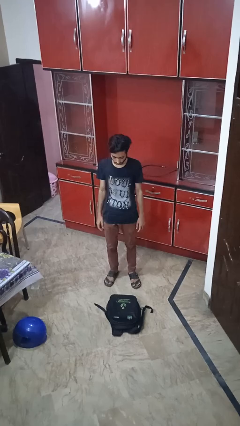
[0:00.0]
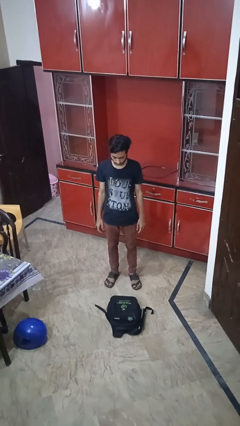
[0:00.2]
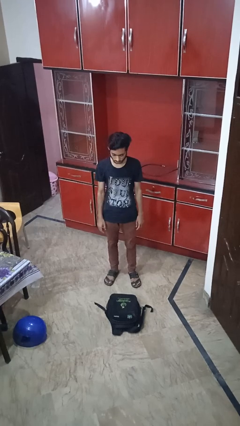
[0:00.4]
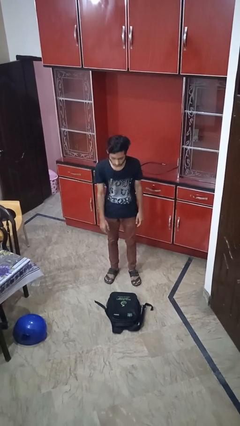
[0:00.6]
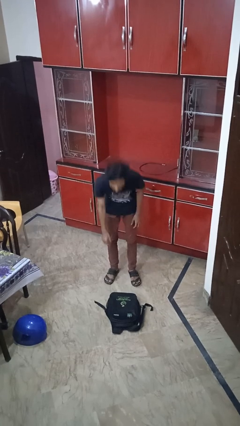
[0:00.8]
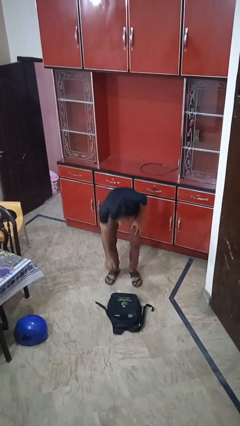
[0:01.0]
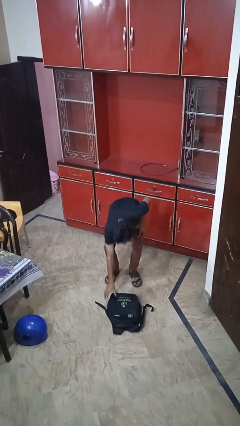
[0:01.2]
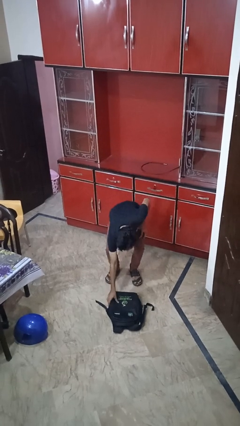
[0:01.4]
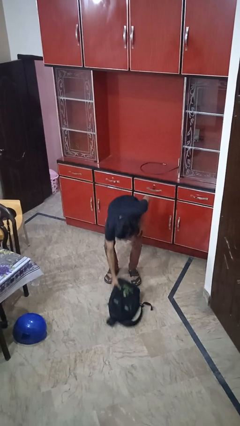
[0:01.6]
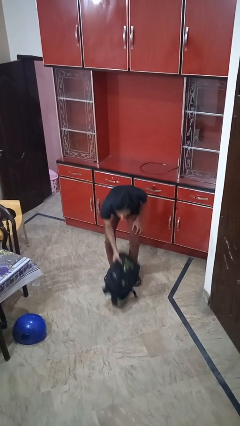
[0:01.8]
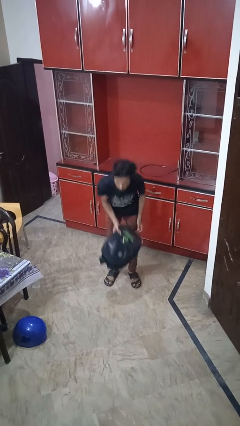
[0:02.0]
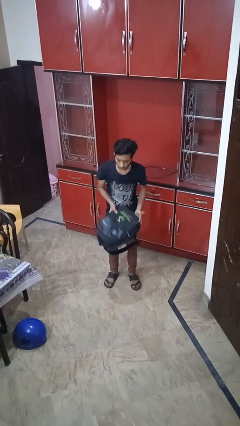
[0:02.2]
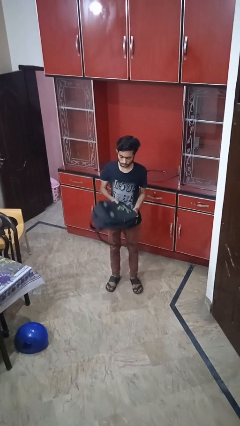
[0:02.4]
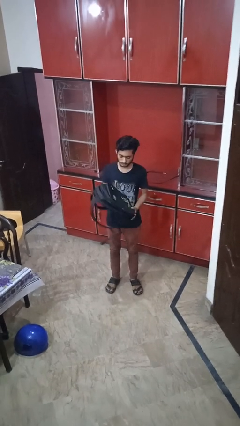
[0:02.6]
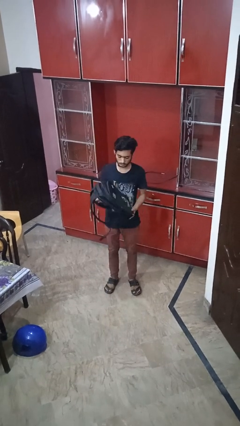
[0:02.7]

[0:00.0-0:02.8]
person picks up object from floor

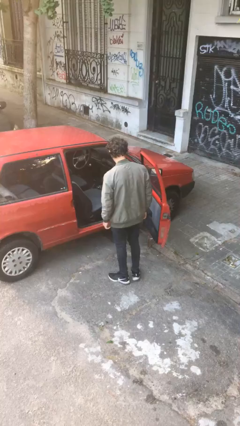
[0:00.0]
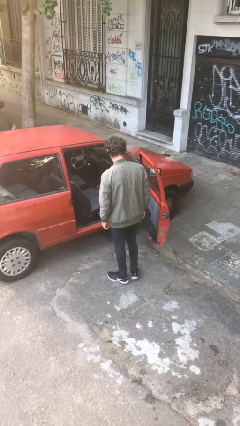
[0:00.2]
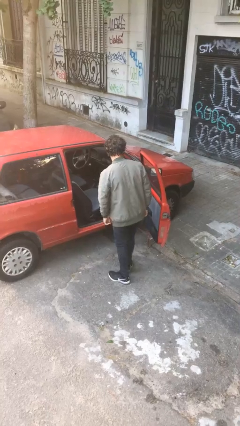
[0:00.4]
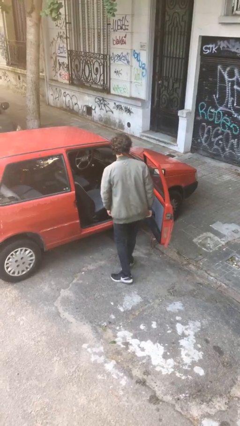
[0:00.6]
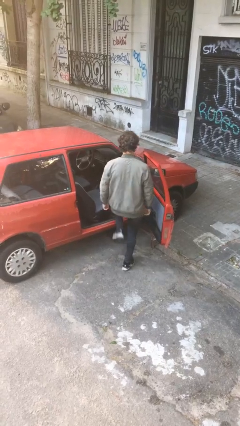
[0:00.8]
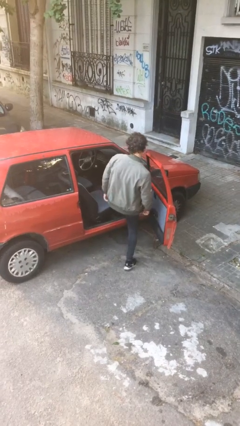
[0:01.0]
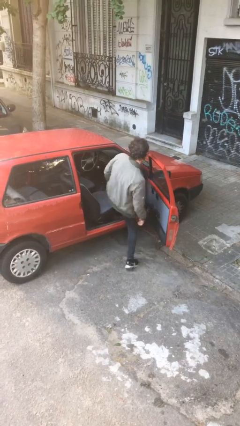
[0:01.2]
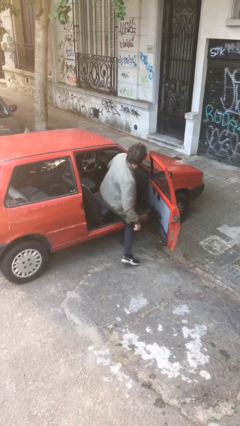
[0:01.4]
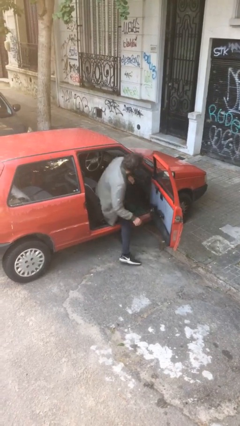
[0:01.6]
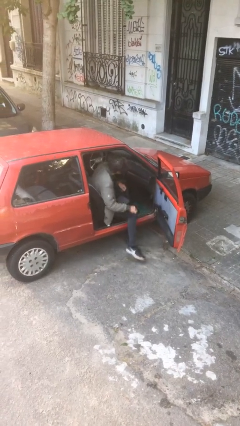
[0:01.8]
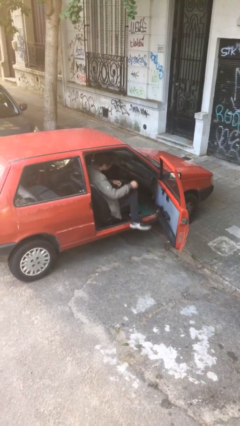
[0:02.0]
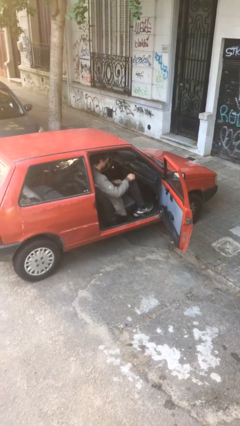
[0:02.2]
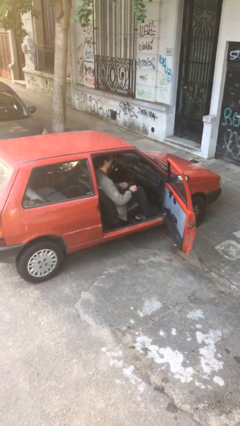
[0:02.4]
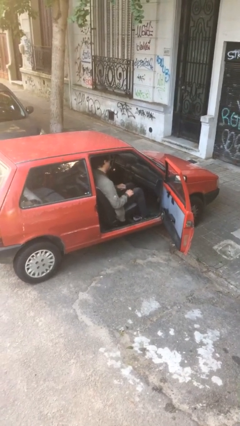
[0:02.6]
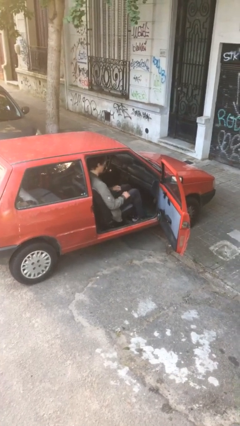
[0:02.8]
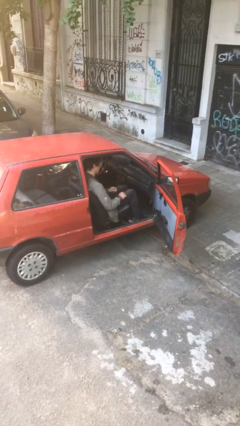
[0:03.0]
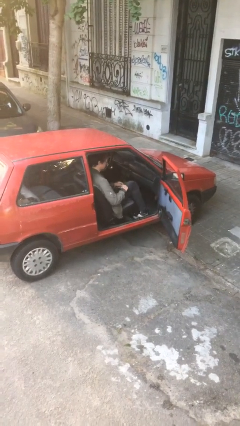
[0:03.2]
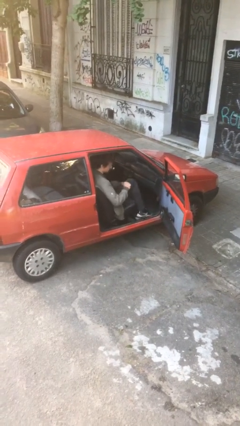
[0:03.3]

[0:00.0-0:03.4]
person enters car

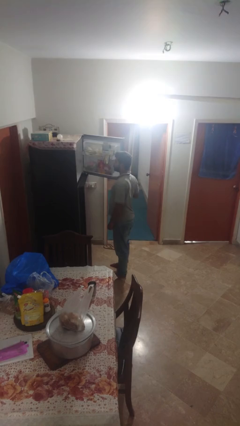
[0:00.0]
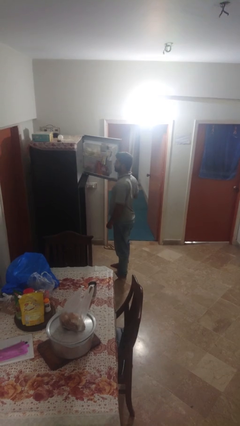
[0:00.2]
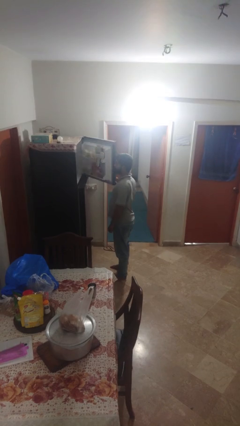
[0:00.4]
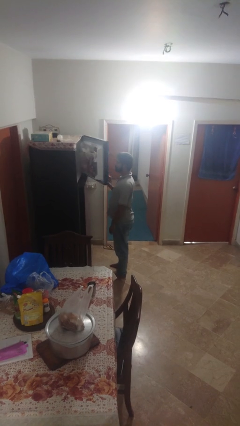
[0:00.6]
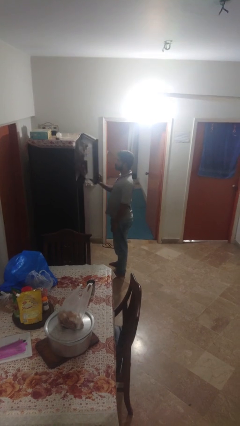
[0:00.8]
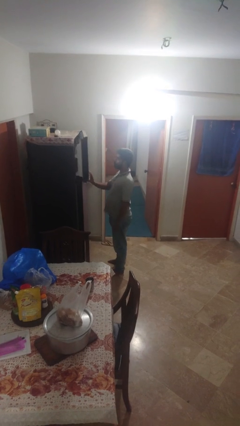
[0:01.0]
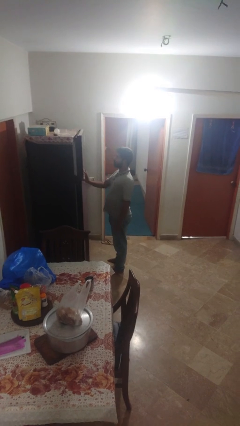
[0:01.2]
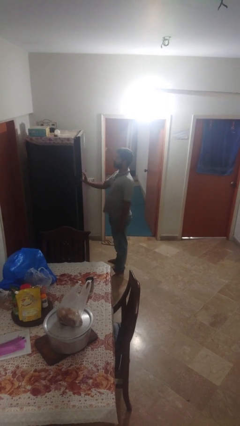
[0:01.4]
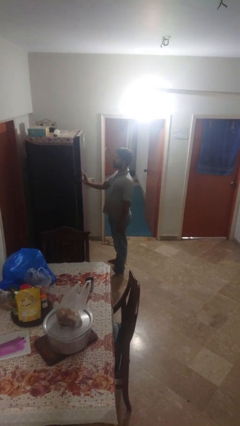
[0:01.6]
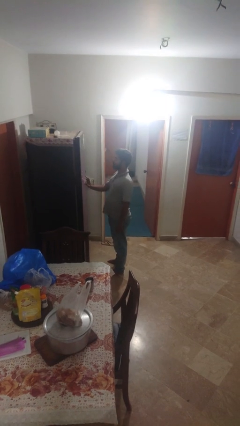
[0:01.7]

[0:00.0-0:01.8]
person closes refrigerator

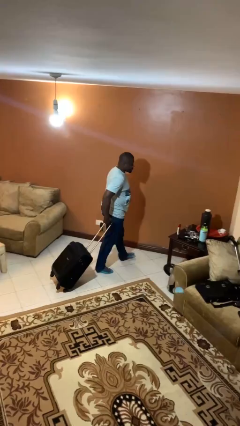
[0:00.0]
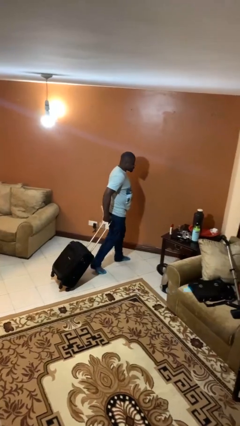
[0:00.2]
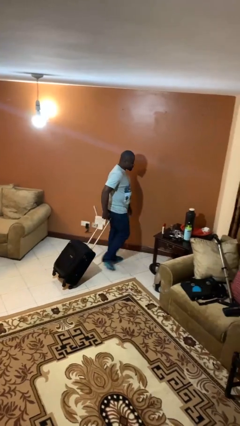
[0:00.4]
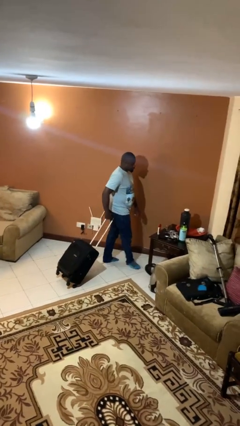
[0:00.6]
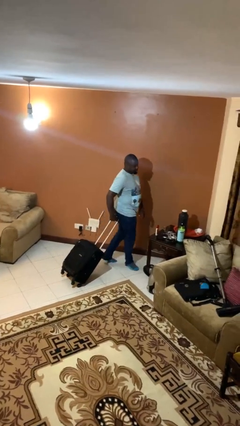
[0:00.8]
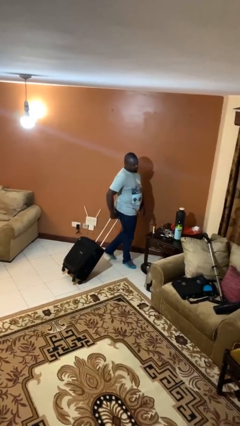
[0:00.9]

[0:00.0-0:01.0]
person pushes wheeled cart

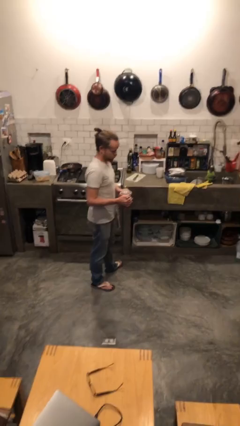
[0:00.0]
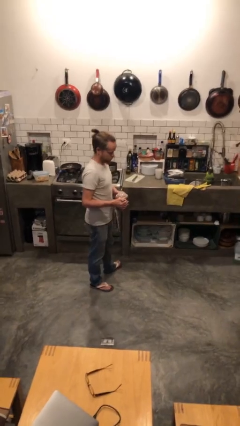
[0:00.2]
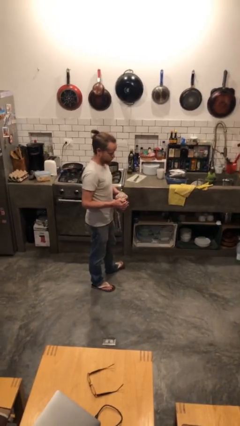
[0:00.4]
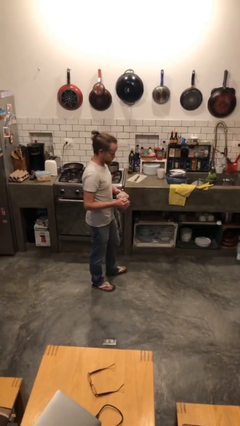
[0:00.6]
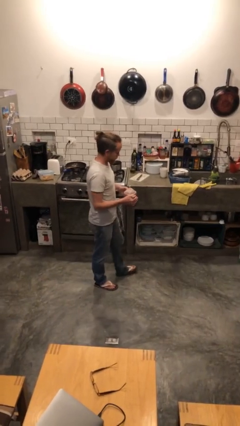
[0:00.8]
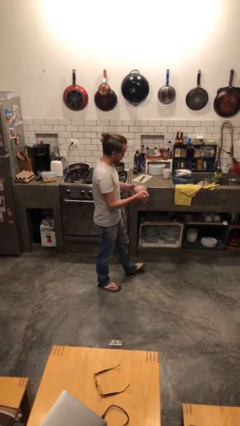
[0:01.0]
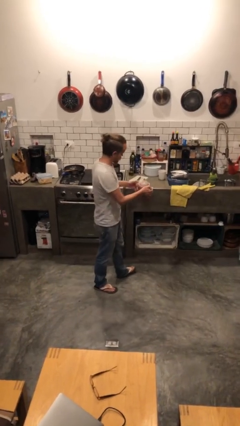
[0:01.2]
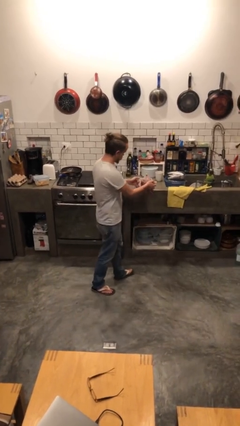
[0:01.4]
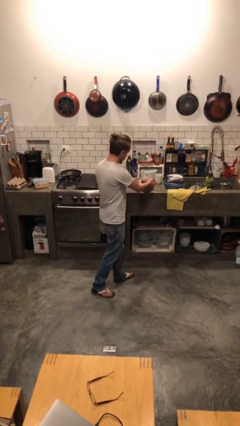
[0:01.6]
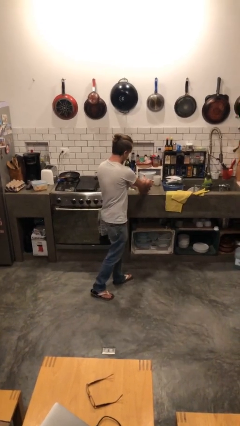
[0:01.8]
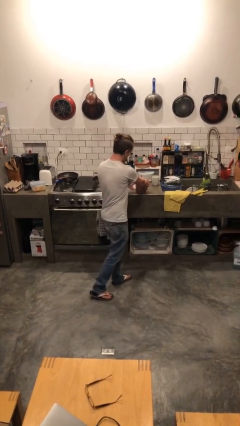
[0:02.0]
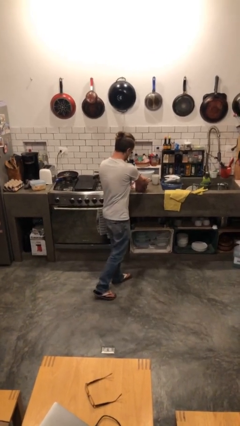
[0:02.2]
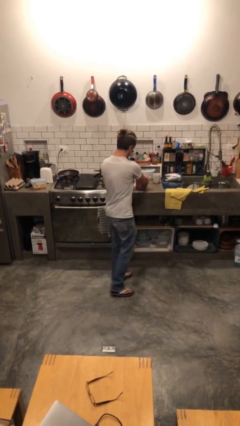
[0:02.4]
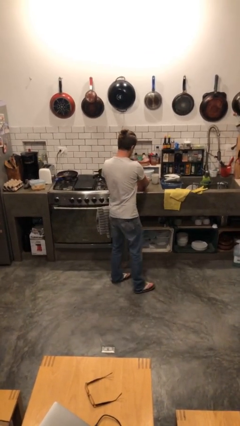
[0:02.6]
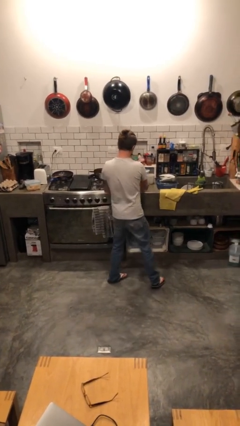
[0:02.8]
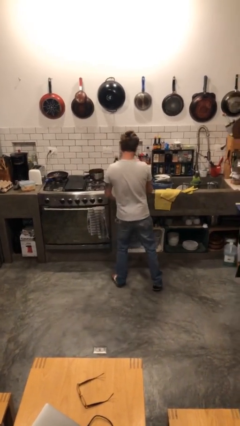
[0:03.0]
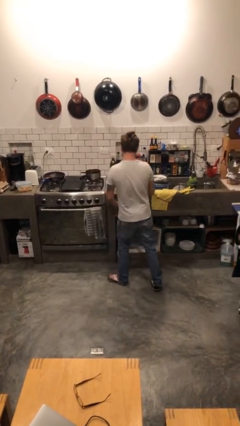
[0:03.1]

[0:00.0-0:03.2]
person puts down object on countertop

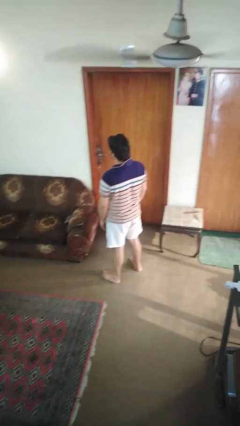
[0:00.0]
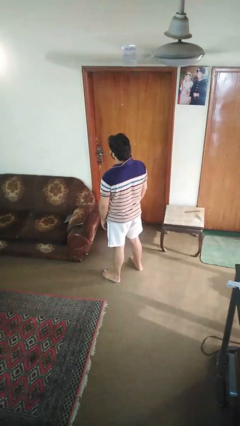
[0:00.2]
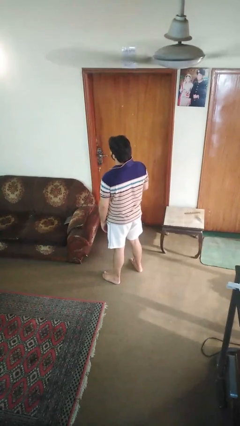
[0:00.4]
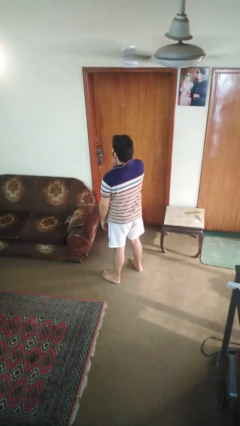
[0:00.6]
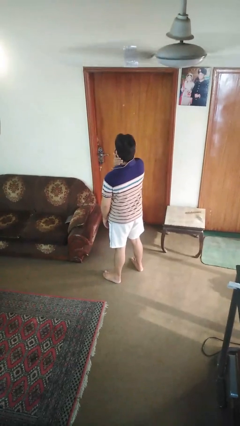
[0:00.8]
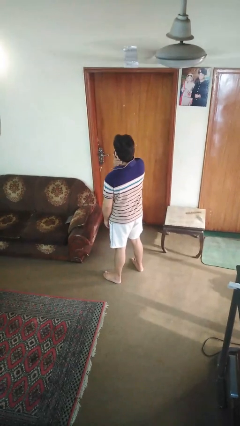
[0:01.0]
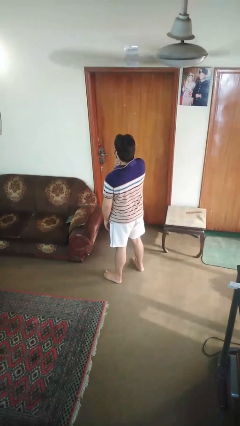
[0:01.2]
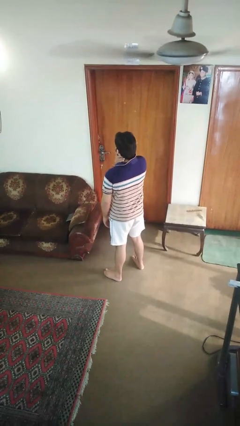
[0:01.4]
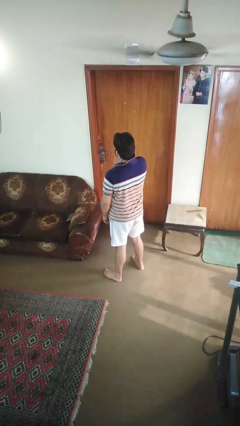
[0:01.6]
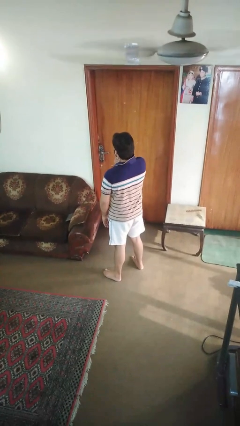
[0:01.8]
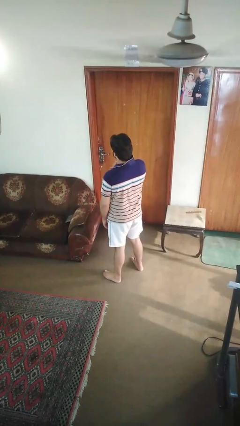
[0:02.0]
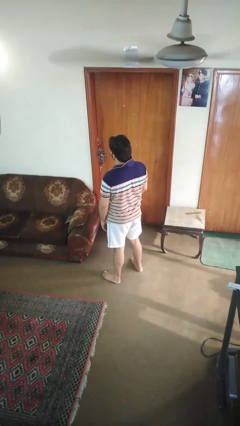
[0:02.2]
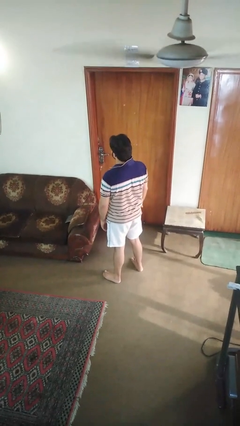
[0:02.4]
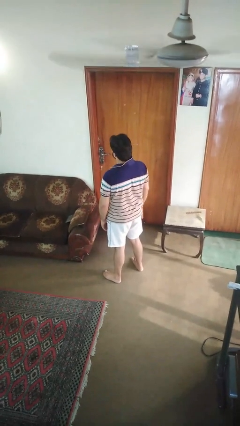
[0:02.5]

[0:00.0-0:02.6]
person rubs neck

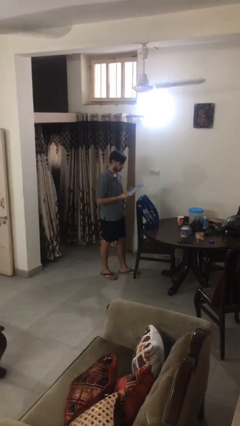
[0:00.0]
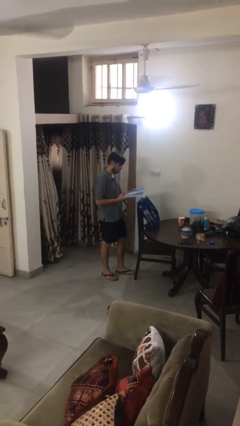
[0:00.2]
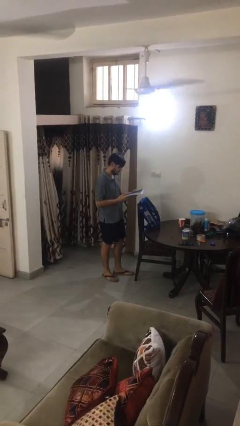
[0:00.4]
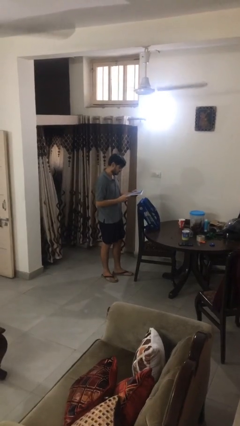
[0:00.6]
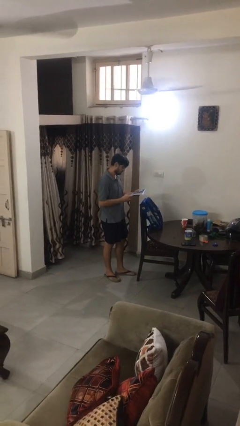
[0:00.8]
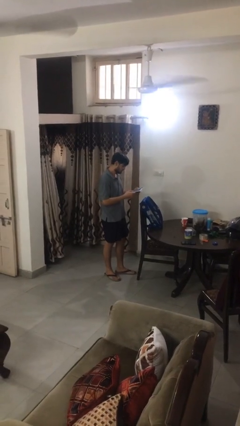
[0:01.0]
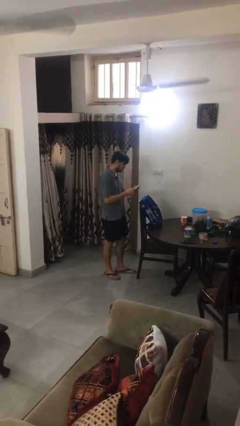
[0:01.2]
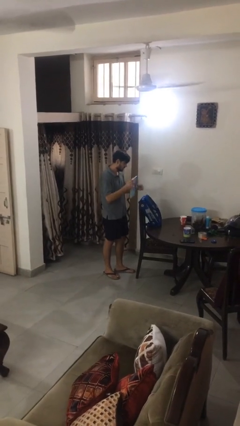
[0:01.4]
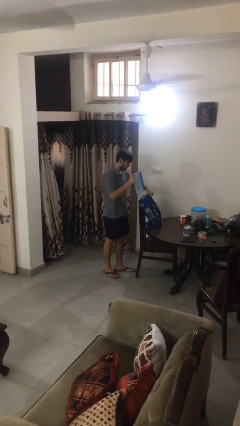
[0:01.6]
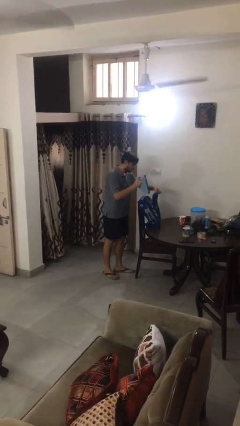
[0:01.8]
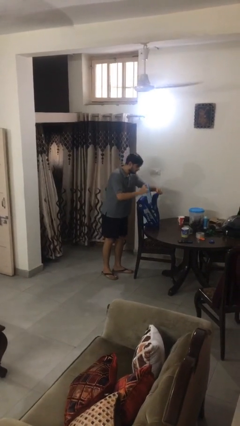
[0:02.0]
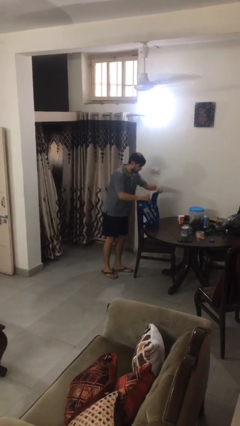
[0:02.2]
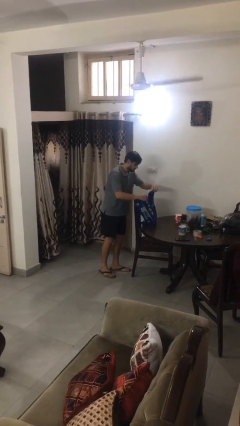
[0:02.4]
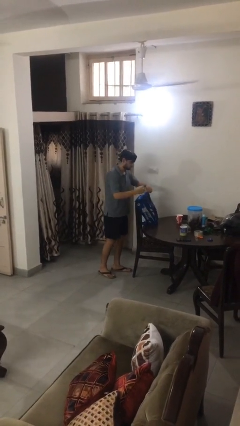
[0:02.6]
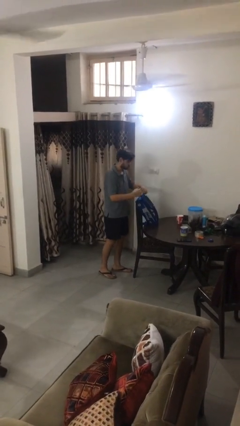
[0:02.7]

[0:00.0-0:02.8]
person puts object into backpack
